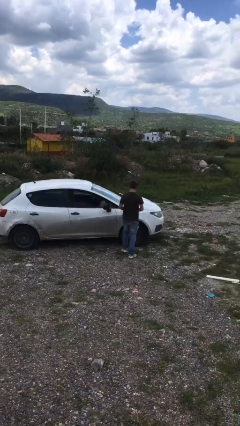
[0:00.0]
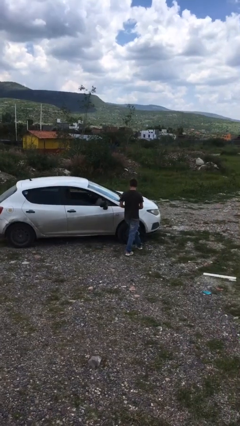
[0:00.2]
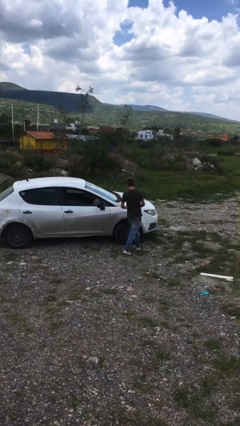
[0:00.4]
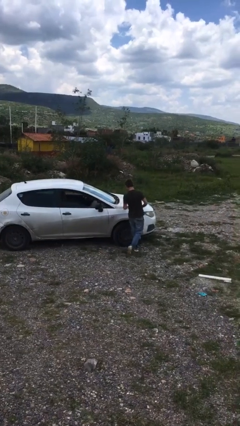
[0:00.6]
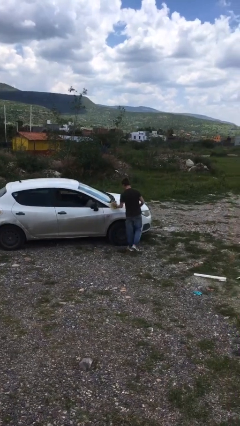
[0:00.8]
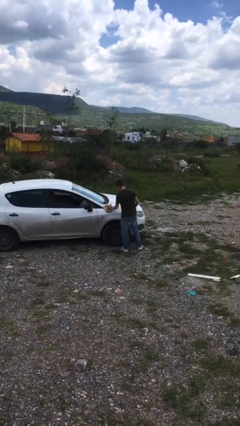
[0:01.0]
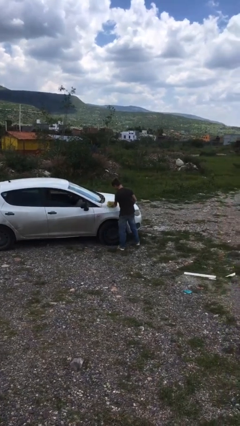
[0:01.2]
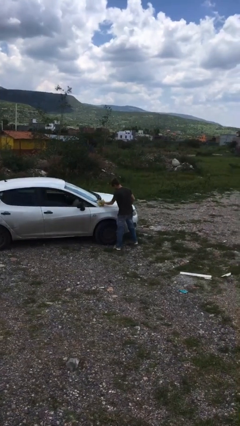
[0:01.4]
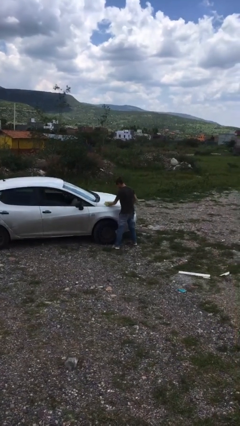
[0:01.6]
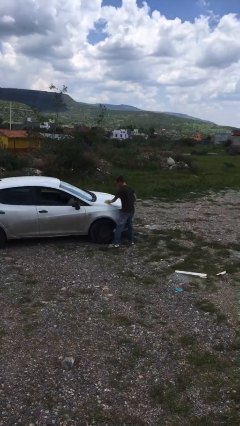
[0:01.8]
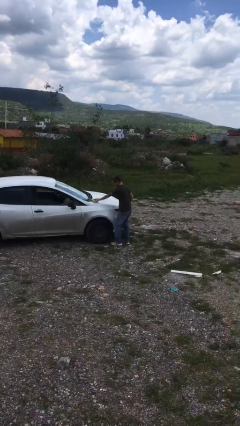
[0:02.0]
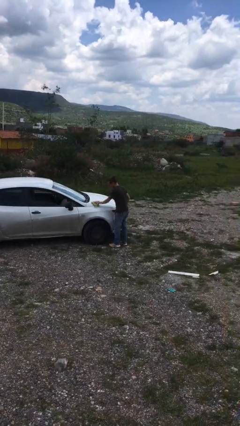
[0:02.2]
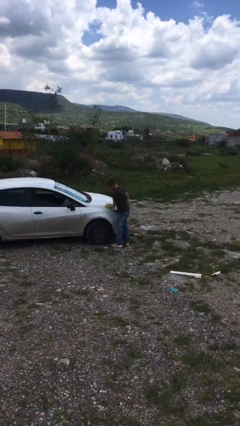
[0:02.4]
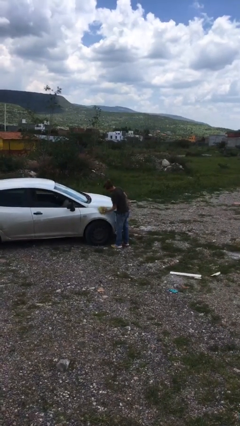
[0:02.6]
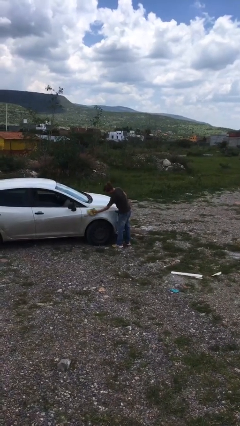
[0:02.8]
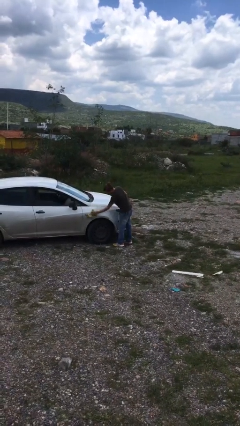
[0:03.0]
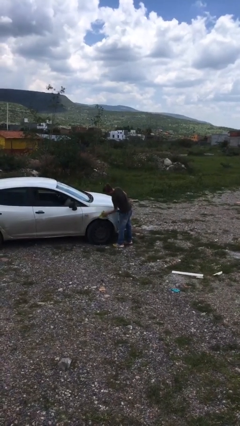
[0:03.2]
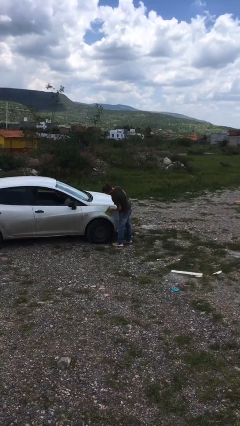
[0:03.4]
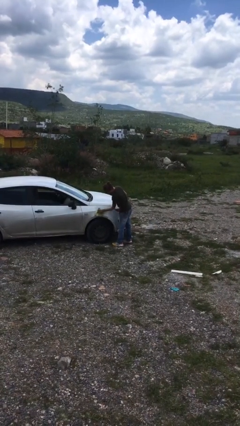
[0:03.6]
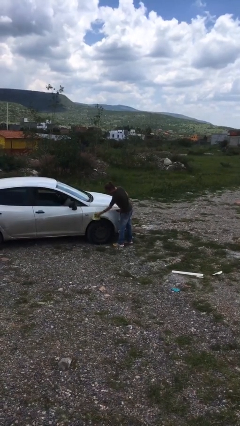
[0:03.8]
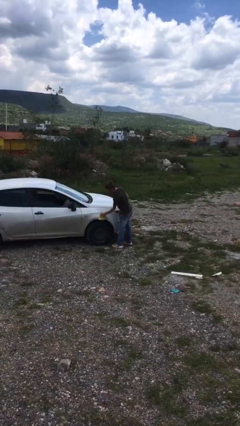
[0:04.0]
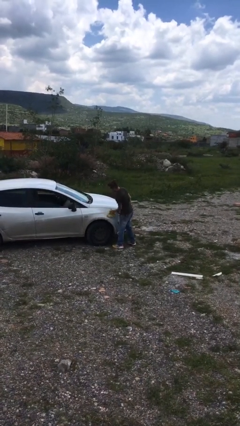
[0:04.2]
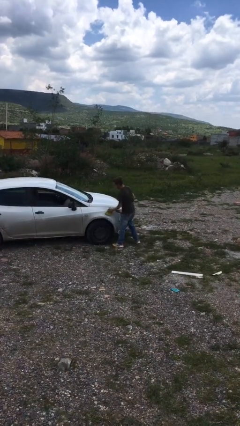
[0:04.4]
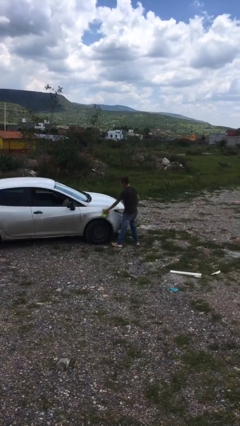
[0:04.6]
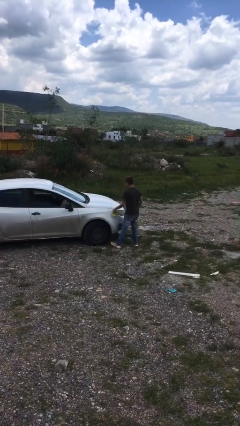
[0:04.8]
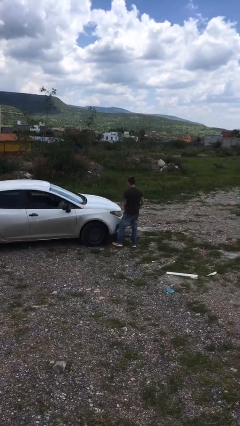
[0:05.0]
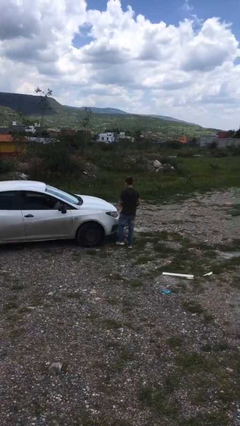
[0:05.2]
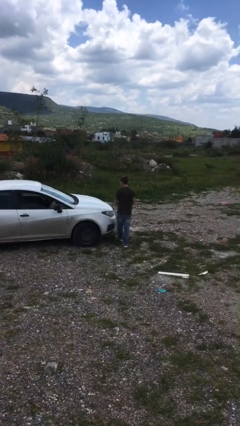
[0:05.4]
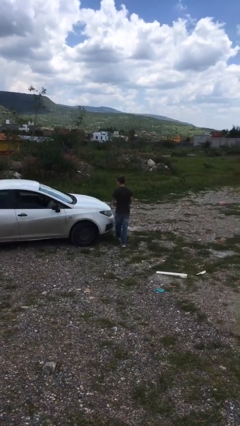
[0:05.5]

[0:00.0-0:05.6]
person polishes car with rag

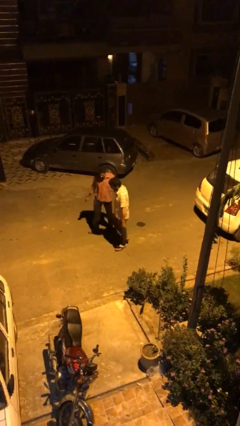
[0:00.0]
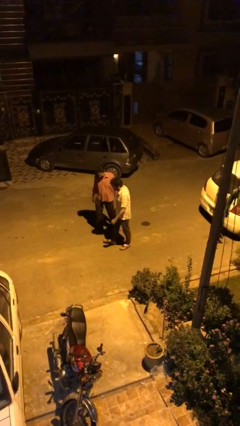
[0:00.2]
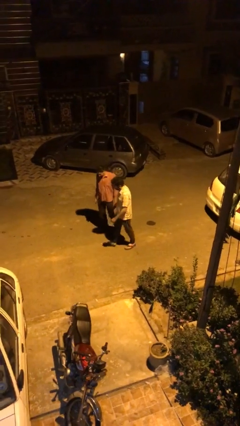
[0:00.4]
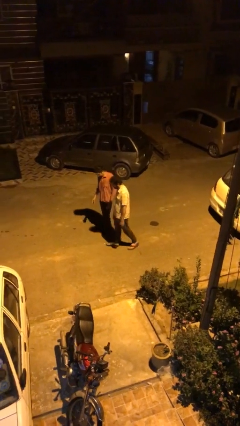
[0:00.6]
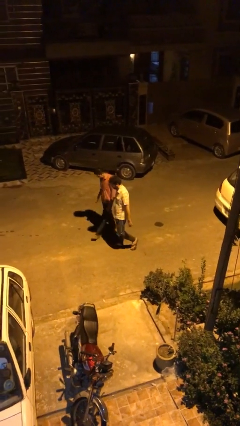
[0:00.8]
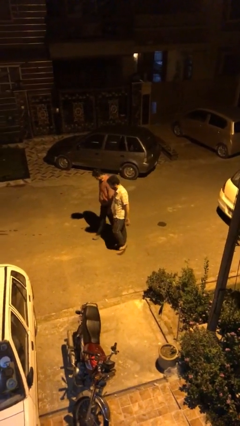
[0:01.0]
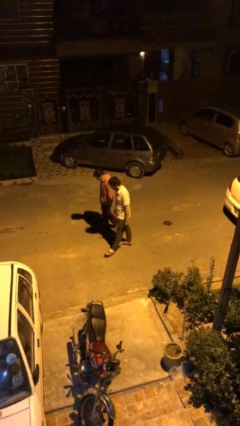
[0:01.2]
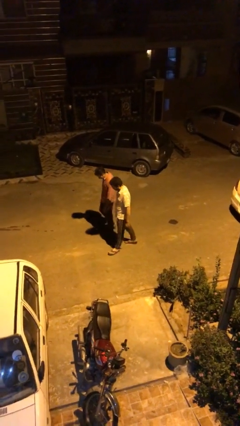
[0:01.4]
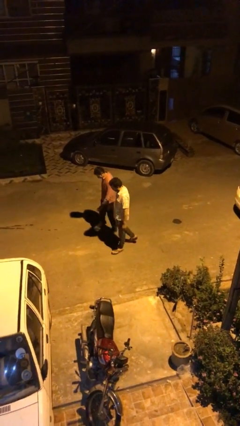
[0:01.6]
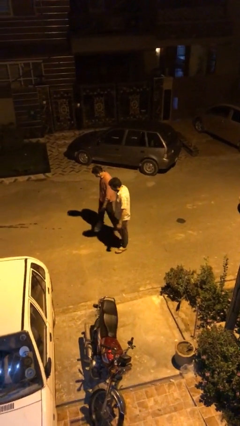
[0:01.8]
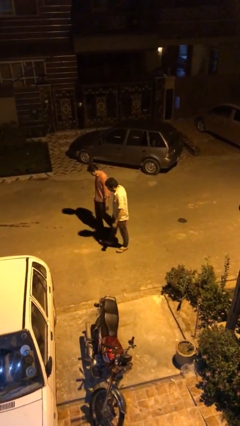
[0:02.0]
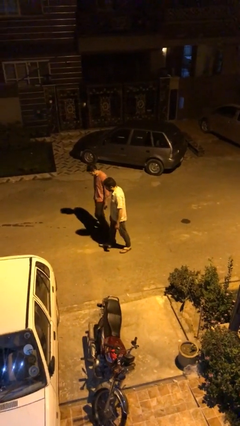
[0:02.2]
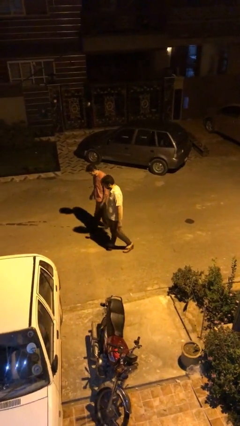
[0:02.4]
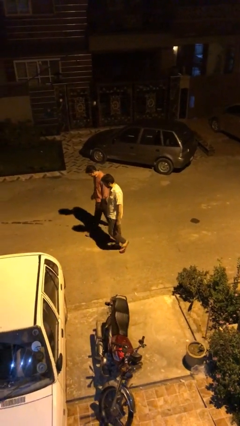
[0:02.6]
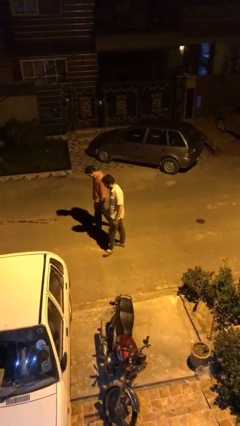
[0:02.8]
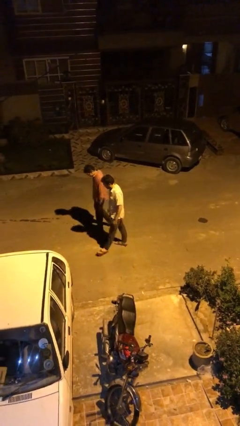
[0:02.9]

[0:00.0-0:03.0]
person talks to person

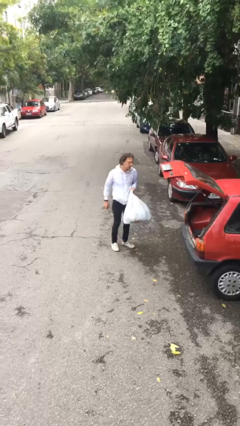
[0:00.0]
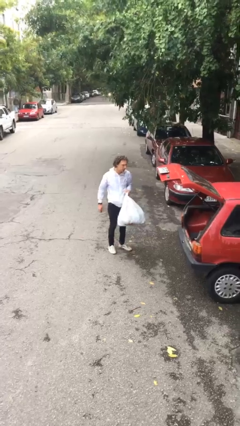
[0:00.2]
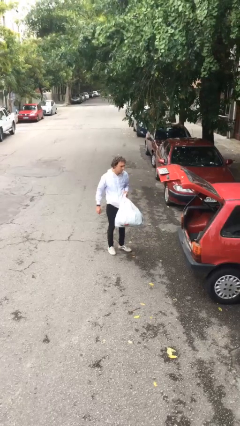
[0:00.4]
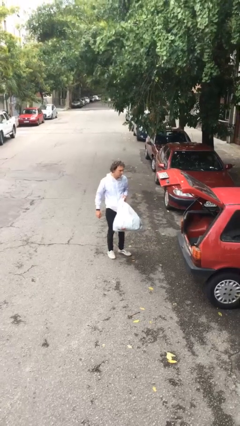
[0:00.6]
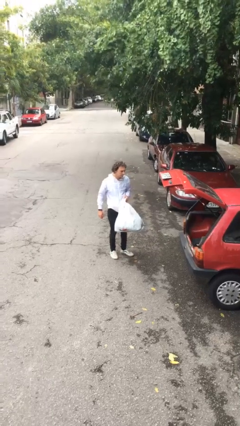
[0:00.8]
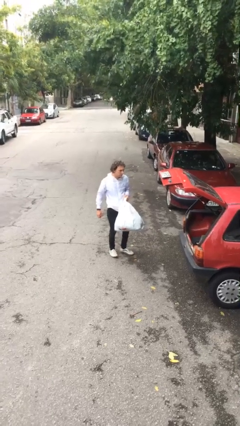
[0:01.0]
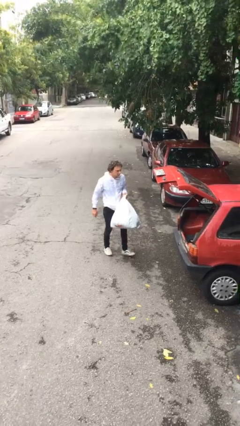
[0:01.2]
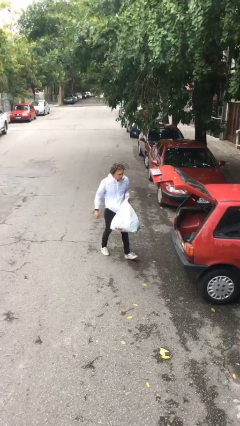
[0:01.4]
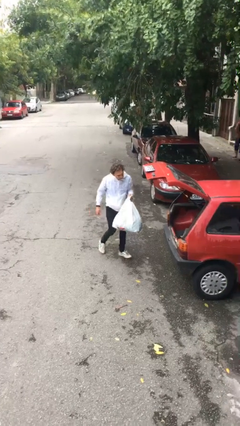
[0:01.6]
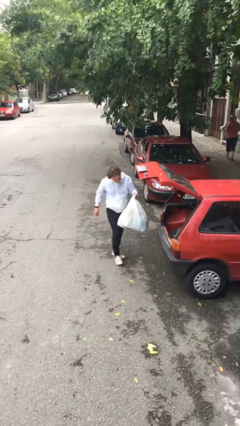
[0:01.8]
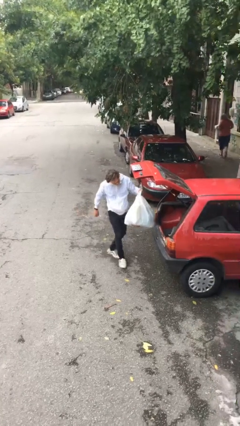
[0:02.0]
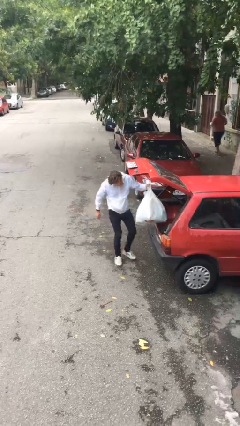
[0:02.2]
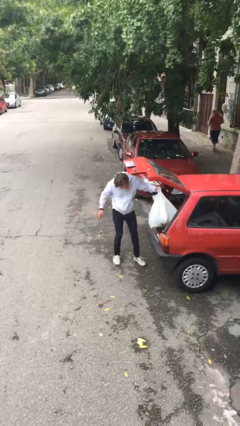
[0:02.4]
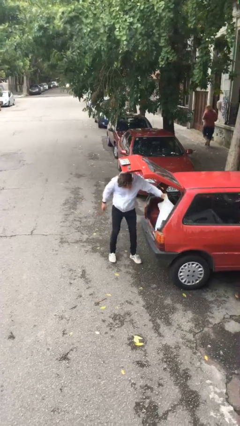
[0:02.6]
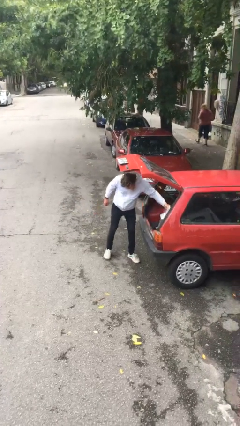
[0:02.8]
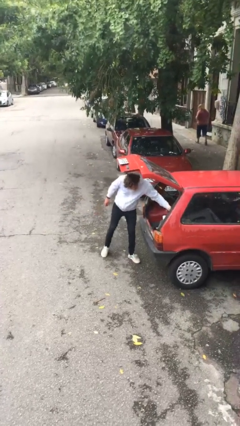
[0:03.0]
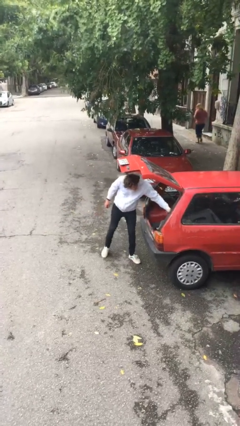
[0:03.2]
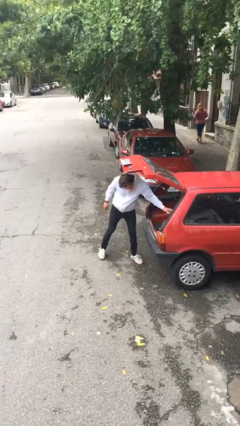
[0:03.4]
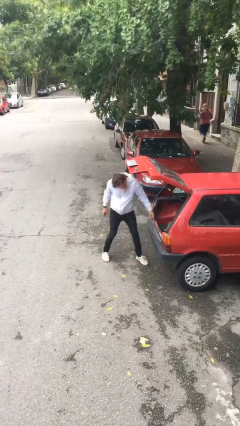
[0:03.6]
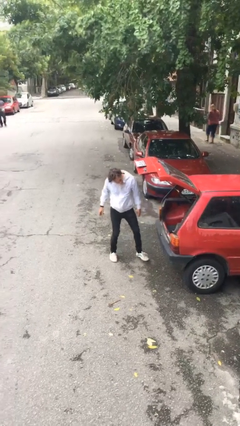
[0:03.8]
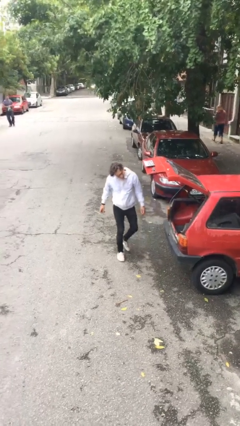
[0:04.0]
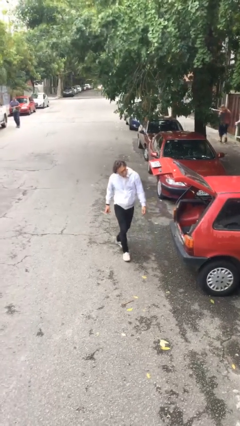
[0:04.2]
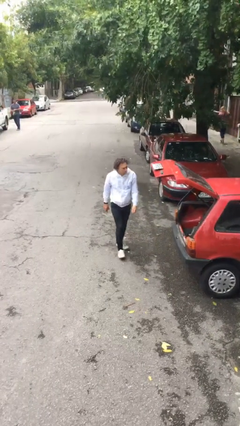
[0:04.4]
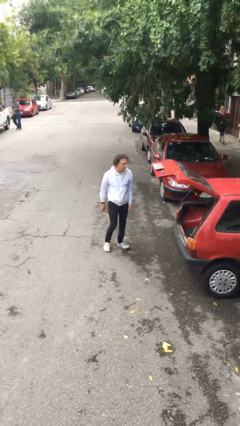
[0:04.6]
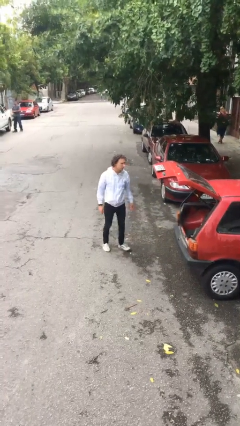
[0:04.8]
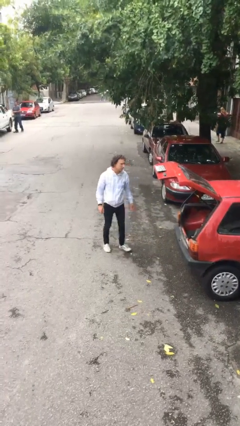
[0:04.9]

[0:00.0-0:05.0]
person loads car

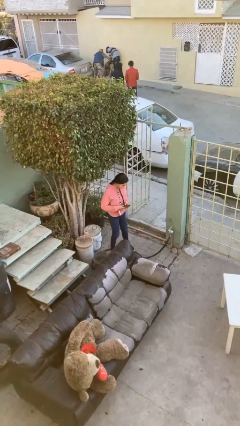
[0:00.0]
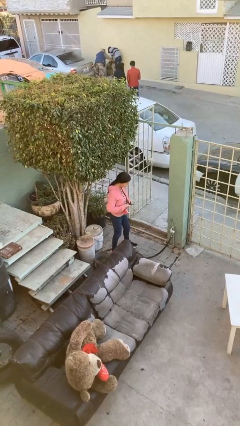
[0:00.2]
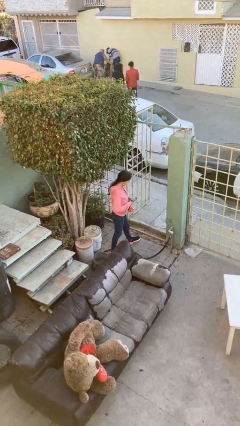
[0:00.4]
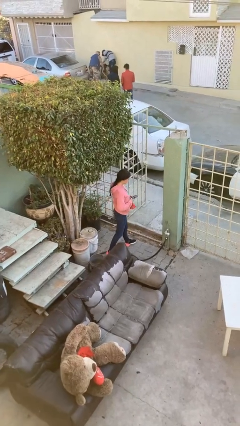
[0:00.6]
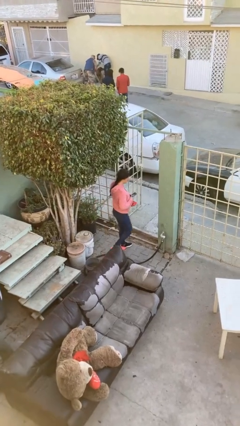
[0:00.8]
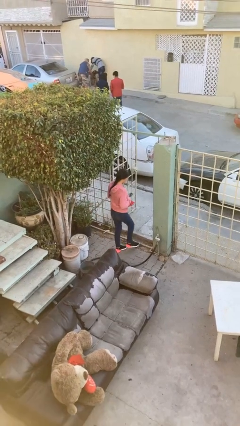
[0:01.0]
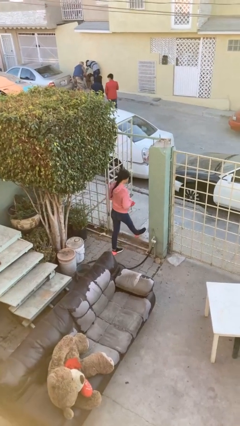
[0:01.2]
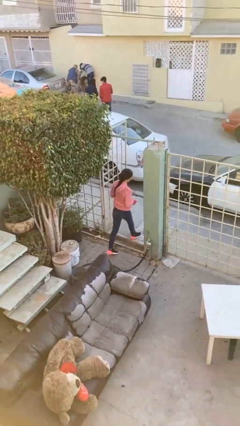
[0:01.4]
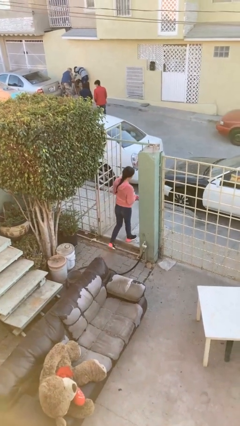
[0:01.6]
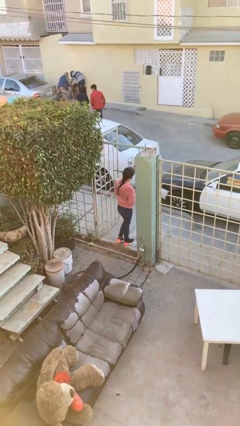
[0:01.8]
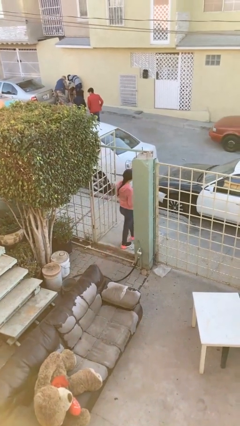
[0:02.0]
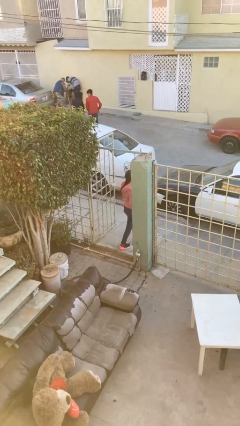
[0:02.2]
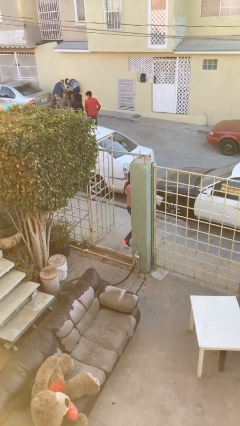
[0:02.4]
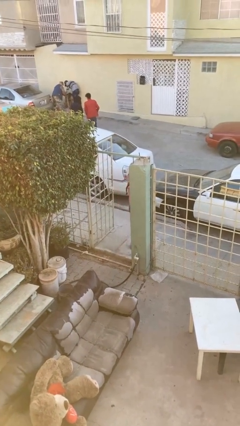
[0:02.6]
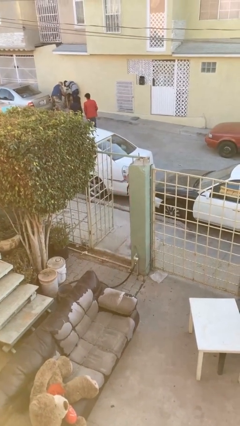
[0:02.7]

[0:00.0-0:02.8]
person exits scene through structure

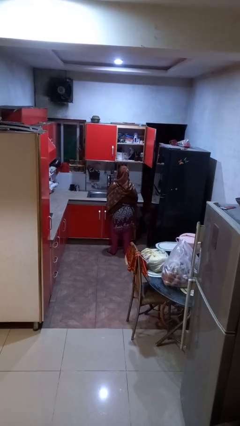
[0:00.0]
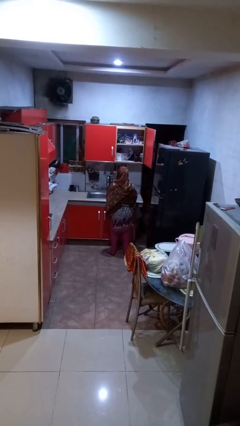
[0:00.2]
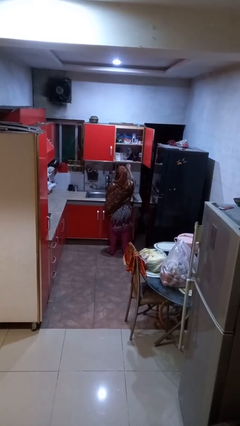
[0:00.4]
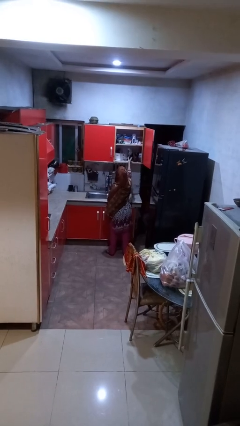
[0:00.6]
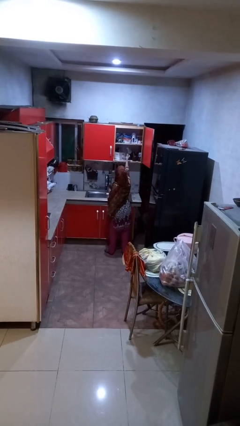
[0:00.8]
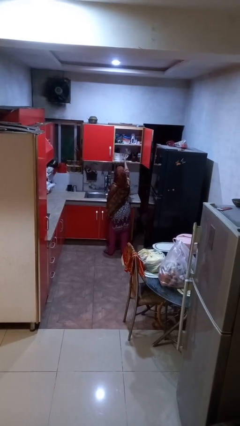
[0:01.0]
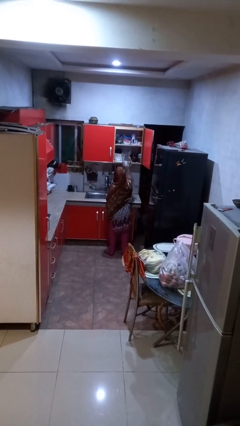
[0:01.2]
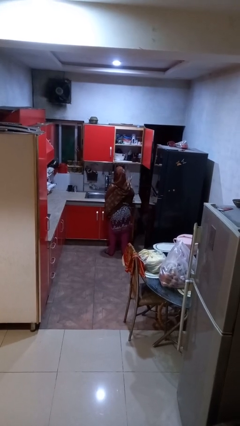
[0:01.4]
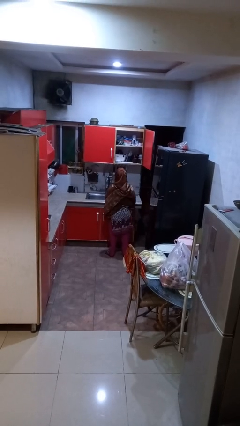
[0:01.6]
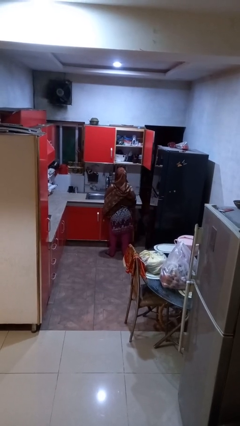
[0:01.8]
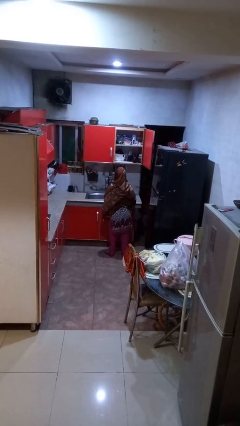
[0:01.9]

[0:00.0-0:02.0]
person takes object from cabinet
